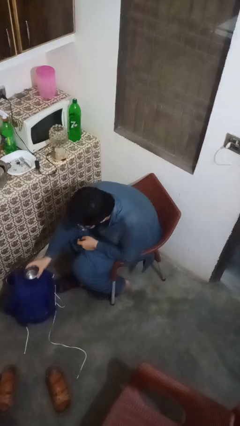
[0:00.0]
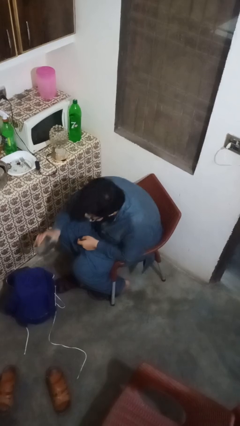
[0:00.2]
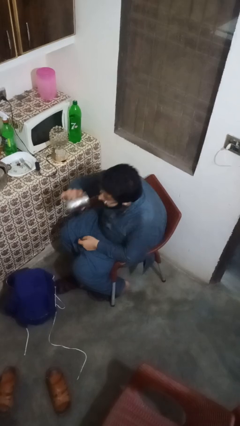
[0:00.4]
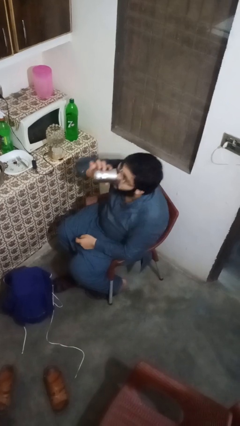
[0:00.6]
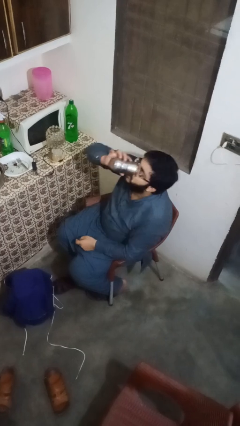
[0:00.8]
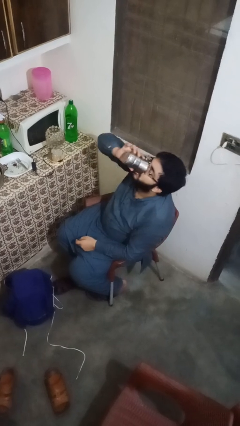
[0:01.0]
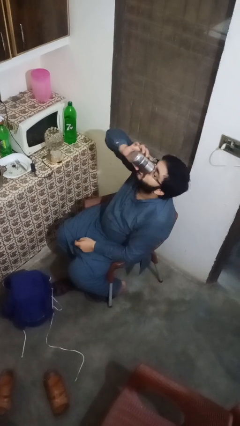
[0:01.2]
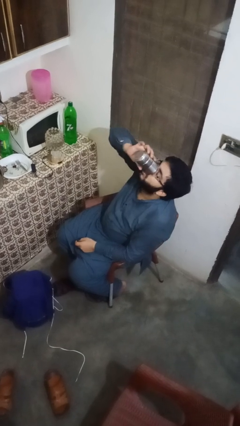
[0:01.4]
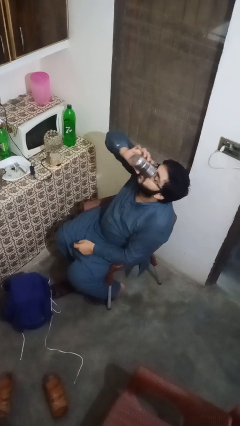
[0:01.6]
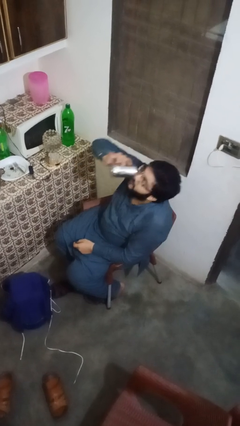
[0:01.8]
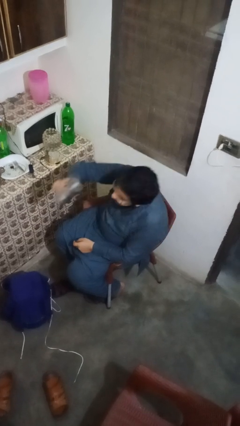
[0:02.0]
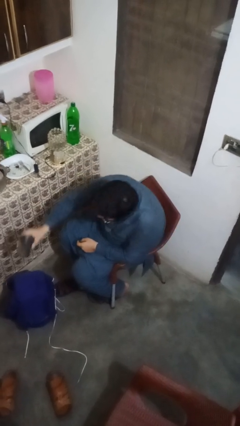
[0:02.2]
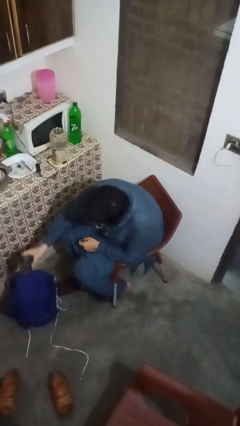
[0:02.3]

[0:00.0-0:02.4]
person drinks from cup

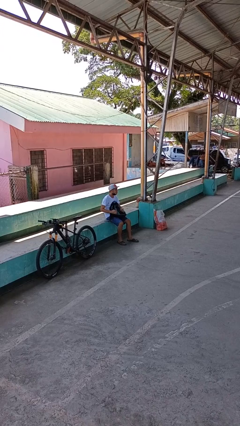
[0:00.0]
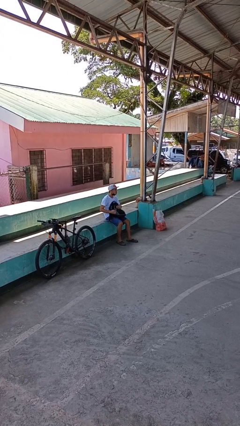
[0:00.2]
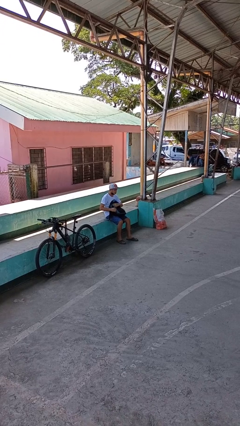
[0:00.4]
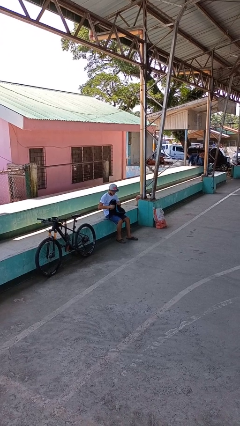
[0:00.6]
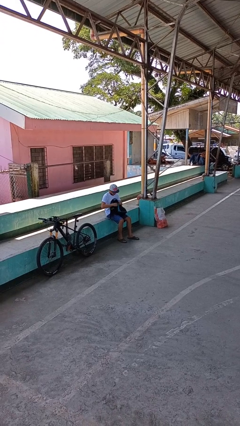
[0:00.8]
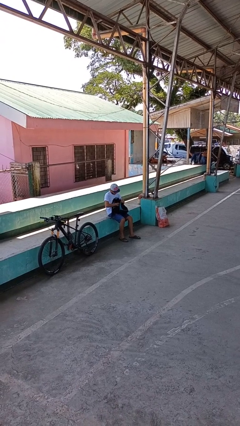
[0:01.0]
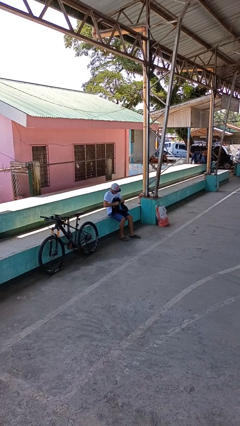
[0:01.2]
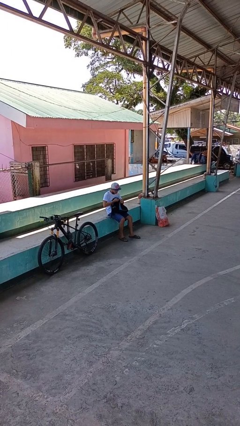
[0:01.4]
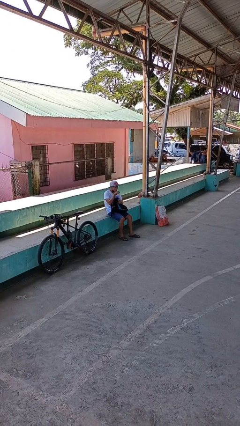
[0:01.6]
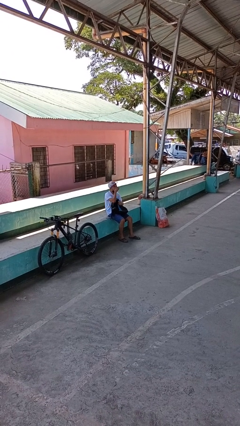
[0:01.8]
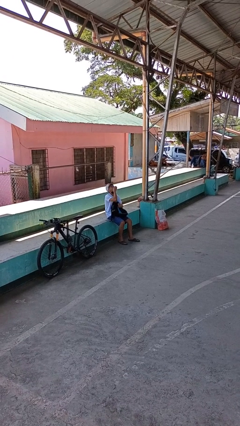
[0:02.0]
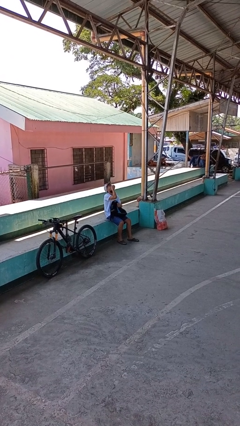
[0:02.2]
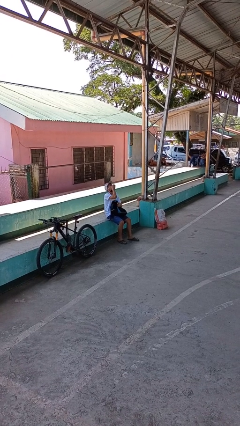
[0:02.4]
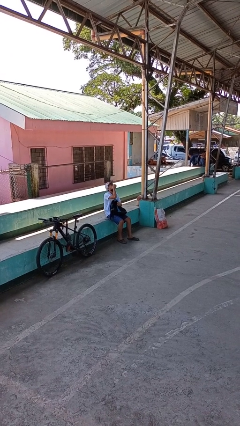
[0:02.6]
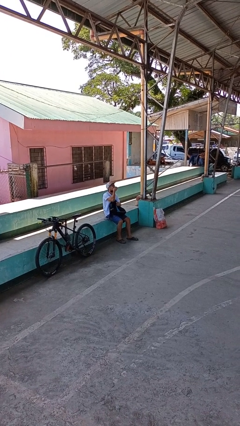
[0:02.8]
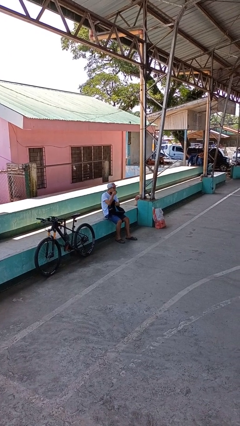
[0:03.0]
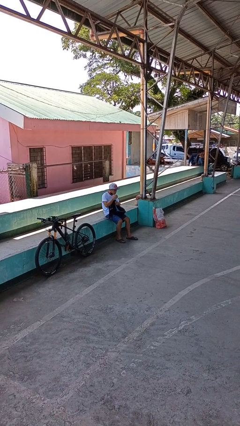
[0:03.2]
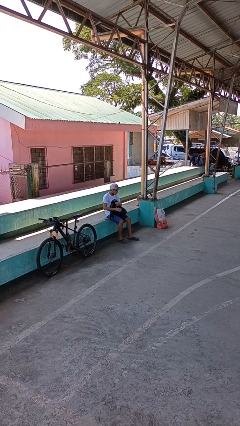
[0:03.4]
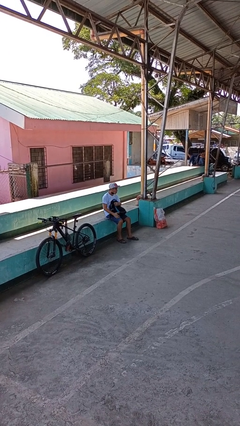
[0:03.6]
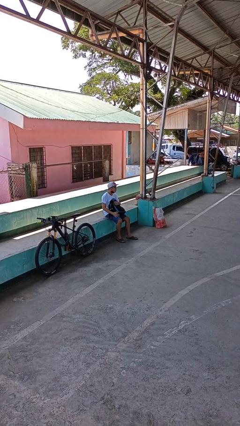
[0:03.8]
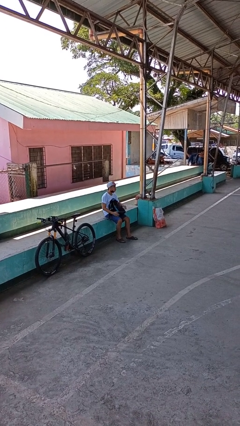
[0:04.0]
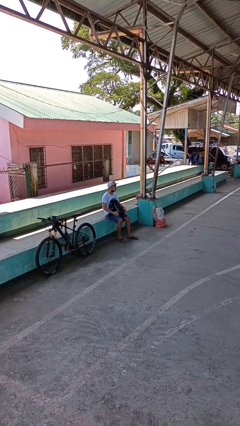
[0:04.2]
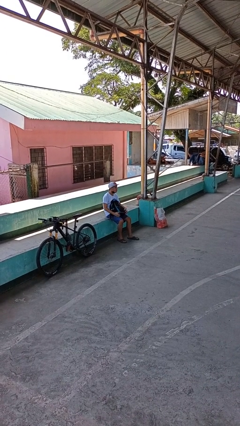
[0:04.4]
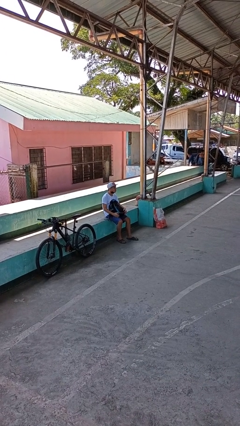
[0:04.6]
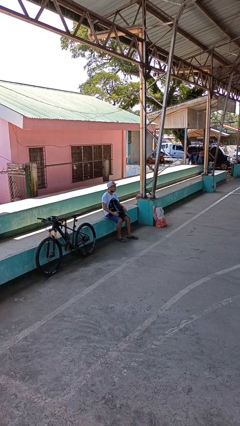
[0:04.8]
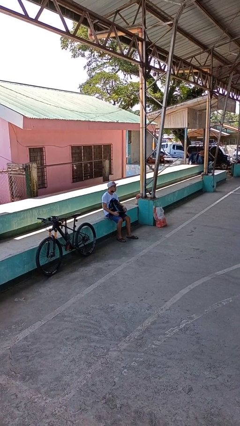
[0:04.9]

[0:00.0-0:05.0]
person eats snack from bag

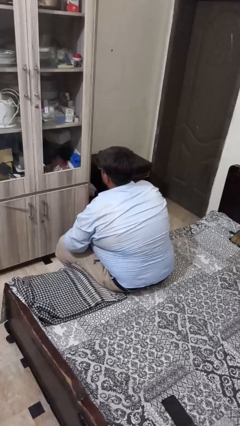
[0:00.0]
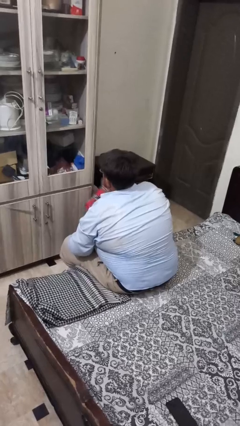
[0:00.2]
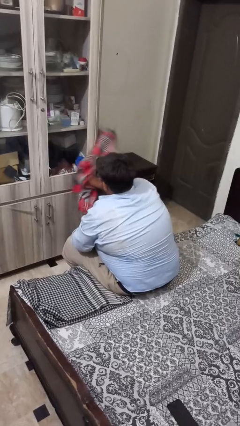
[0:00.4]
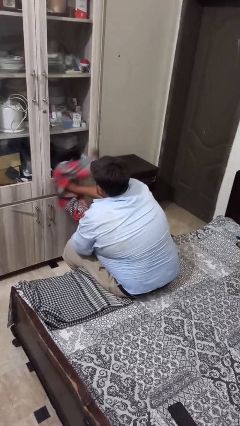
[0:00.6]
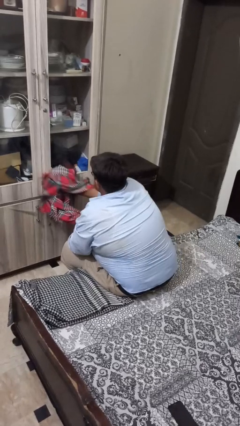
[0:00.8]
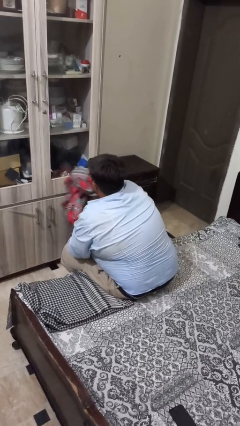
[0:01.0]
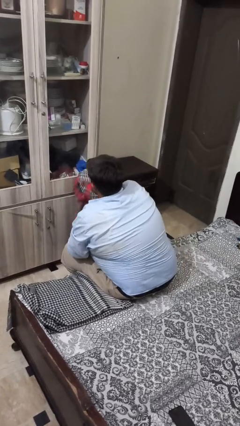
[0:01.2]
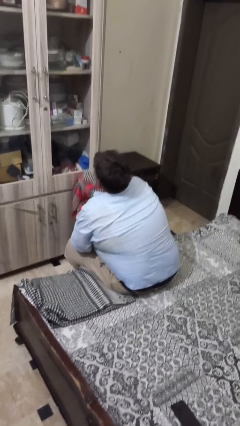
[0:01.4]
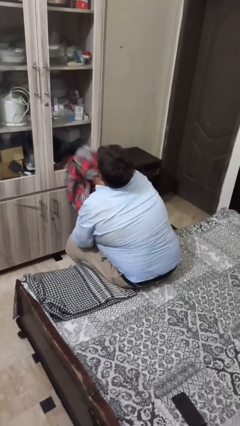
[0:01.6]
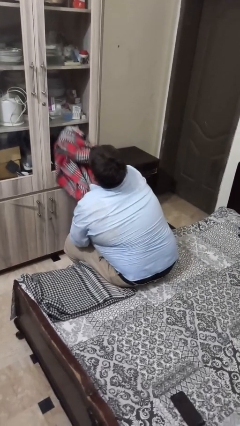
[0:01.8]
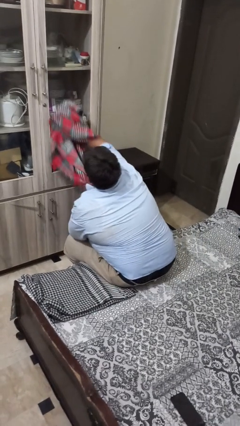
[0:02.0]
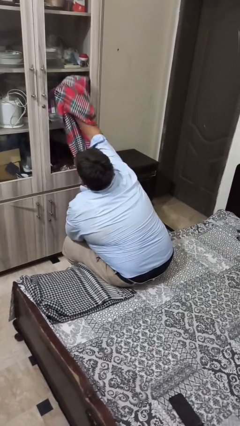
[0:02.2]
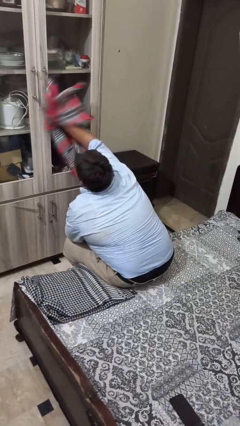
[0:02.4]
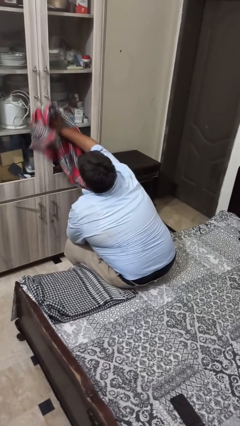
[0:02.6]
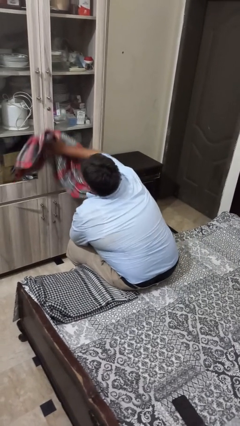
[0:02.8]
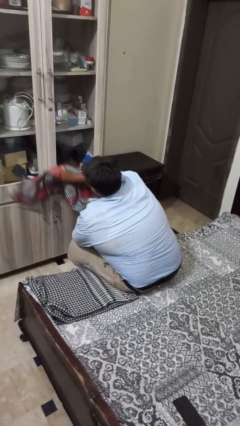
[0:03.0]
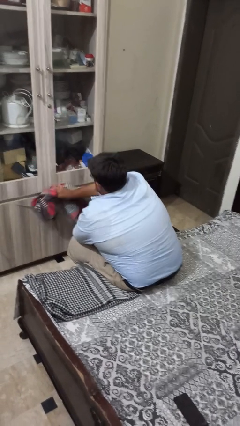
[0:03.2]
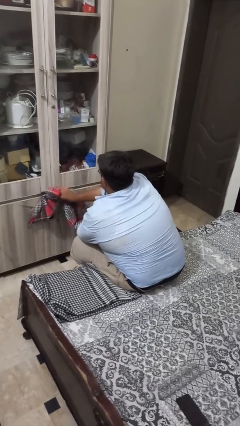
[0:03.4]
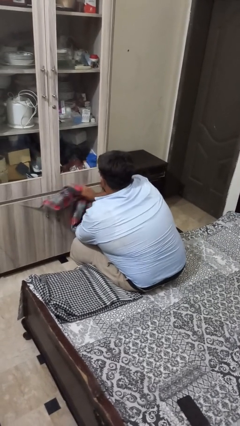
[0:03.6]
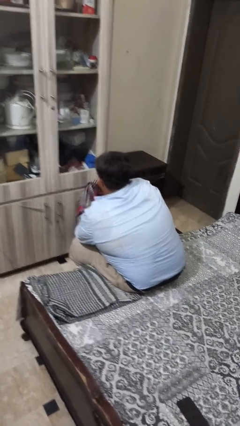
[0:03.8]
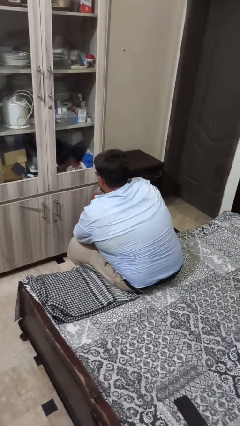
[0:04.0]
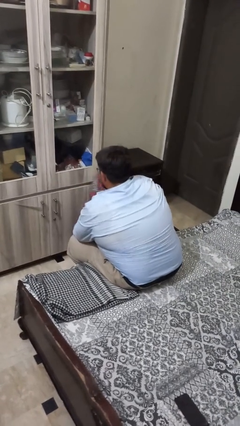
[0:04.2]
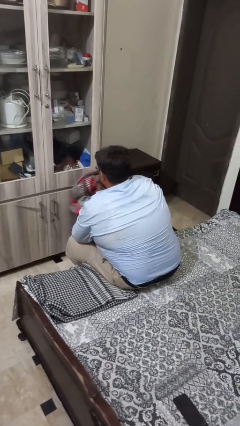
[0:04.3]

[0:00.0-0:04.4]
person dusts furniture

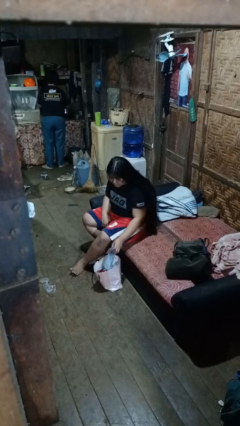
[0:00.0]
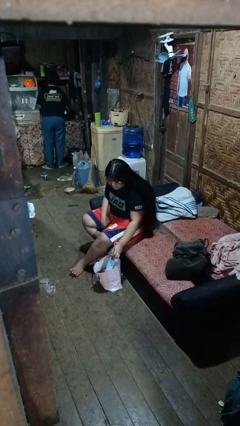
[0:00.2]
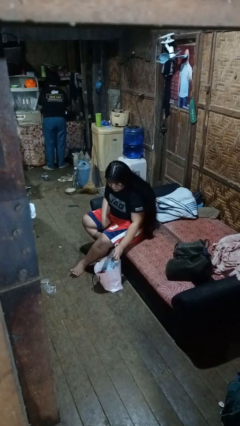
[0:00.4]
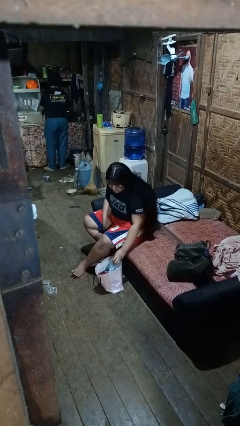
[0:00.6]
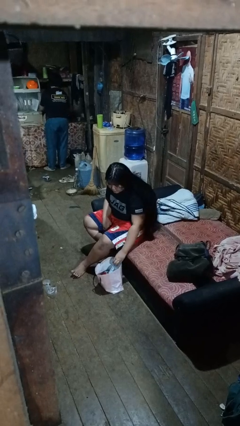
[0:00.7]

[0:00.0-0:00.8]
person puts object into bag

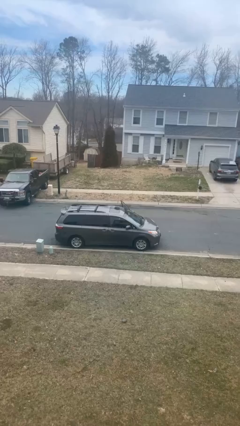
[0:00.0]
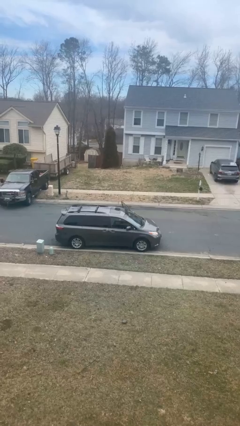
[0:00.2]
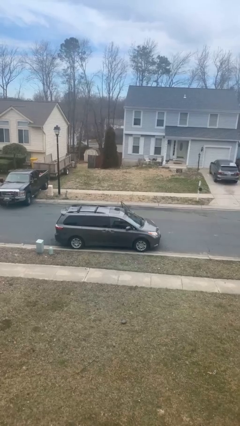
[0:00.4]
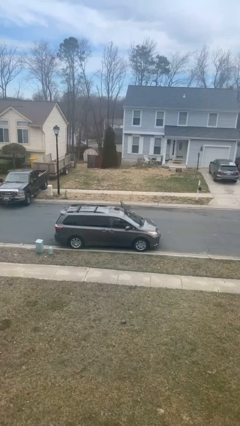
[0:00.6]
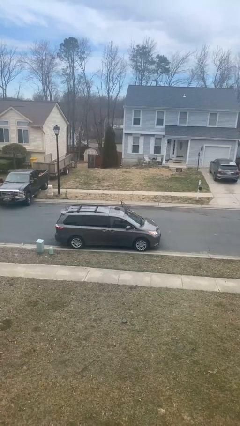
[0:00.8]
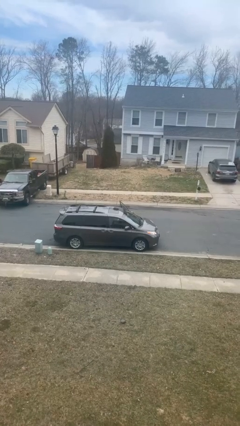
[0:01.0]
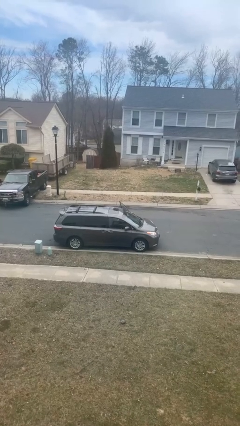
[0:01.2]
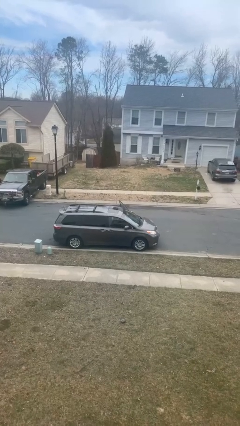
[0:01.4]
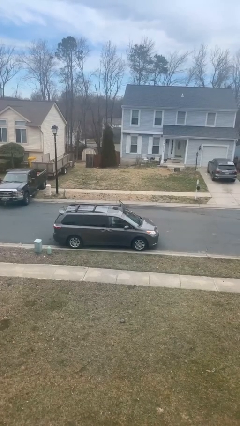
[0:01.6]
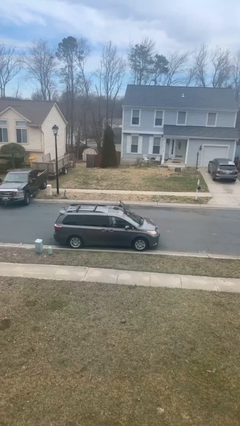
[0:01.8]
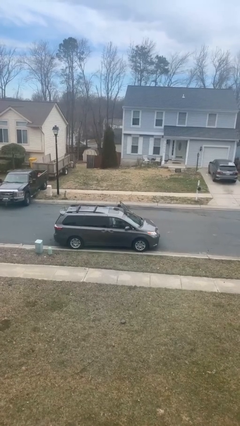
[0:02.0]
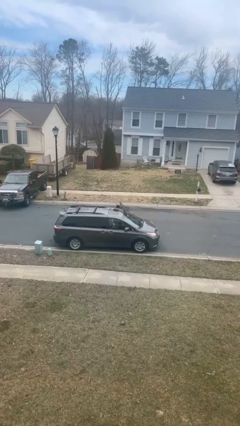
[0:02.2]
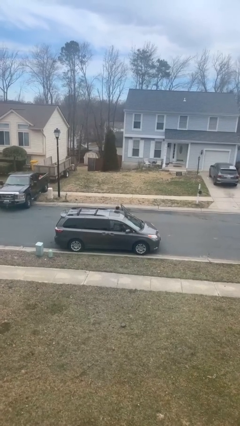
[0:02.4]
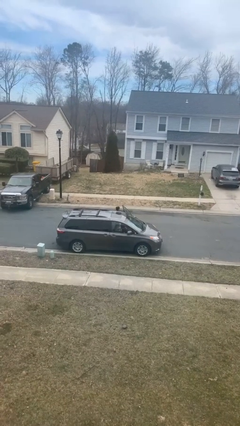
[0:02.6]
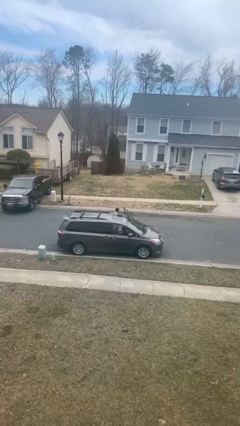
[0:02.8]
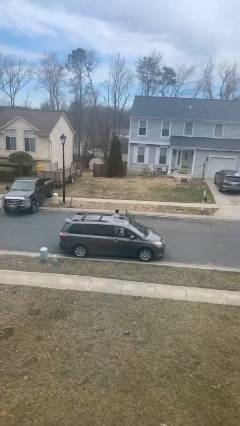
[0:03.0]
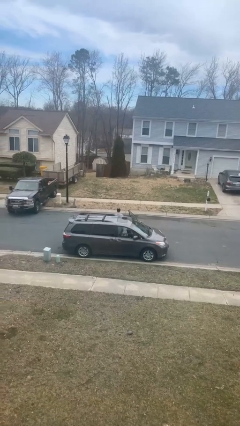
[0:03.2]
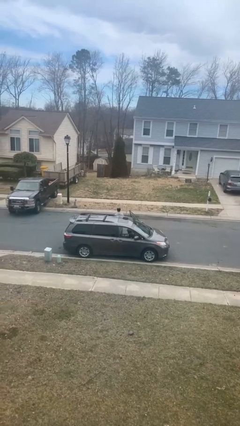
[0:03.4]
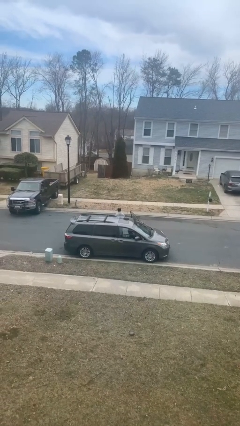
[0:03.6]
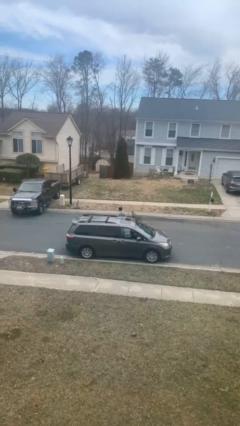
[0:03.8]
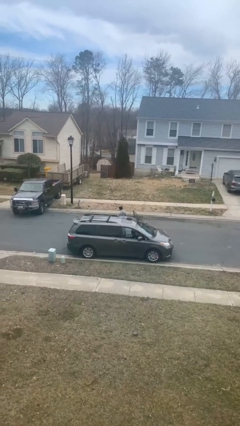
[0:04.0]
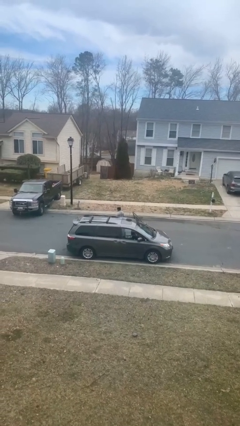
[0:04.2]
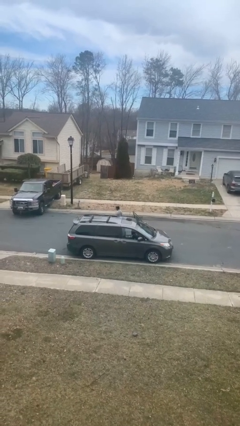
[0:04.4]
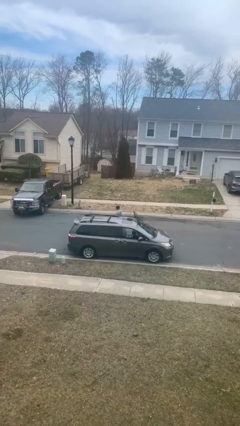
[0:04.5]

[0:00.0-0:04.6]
person exits car

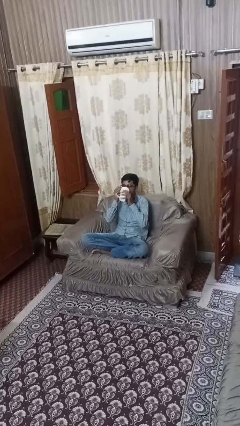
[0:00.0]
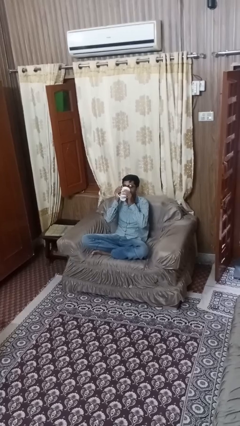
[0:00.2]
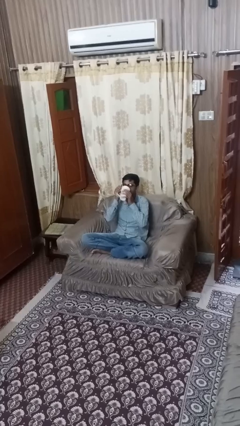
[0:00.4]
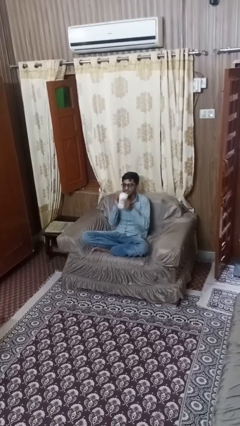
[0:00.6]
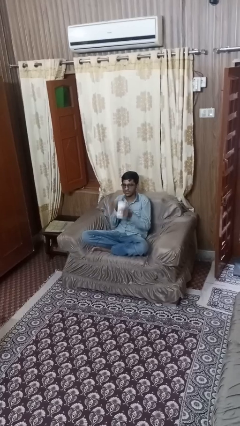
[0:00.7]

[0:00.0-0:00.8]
person drinks from mug
